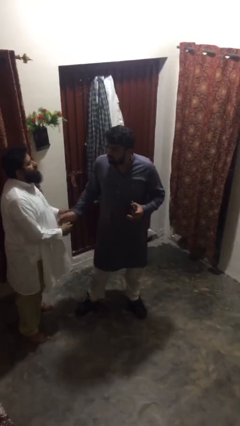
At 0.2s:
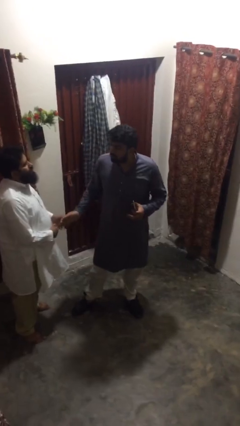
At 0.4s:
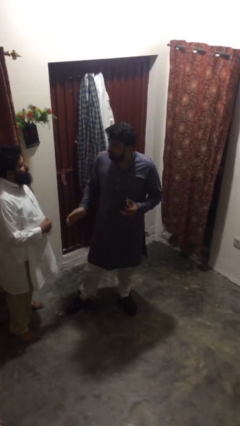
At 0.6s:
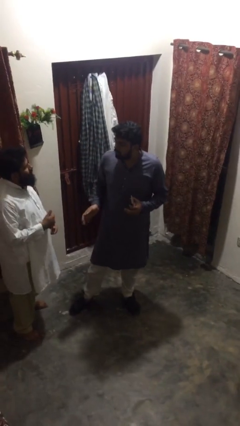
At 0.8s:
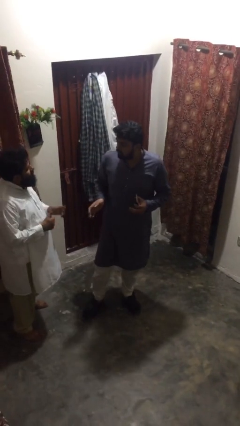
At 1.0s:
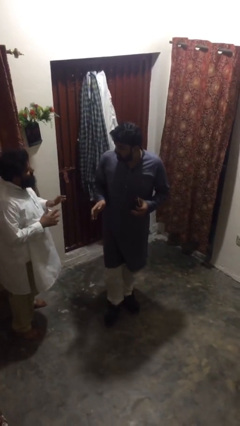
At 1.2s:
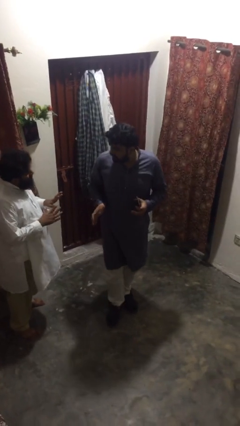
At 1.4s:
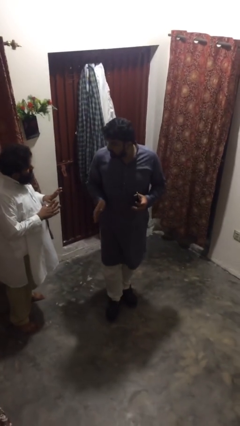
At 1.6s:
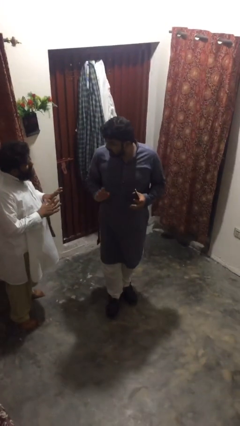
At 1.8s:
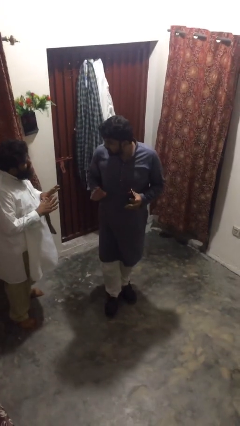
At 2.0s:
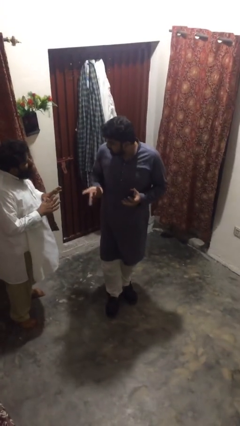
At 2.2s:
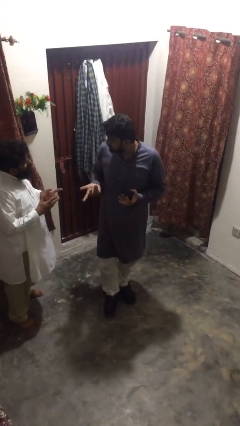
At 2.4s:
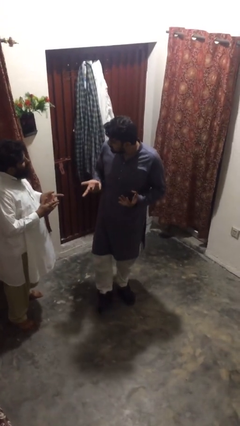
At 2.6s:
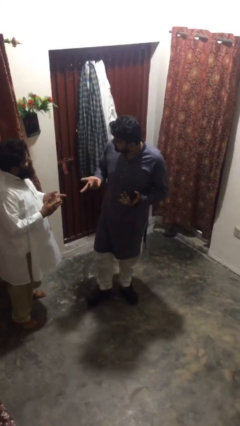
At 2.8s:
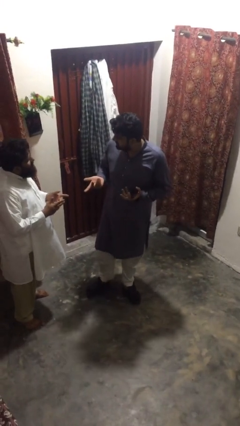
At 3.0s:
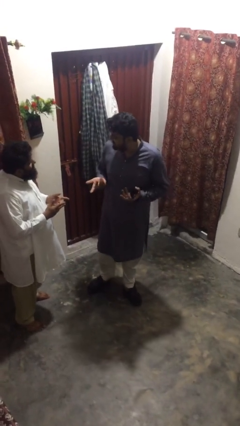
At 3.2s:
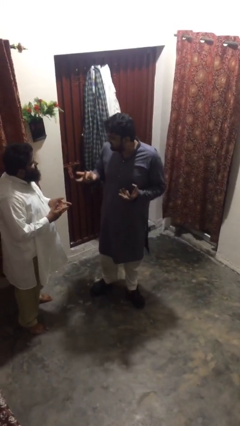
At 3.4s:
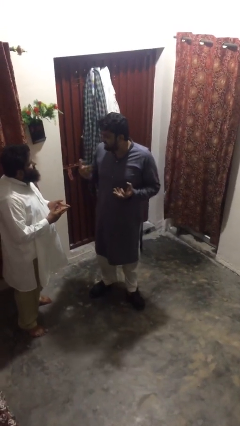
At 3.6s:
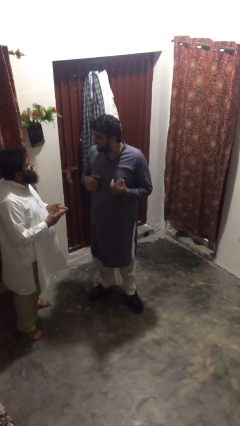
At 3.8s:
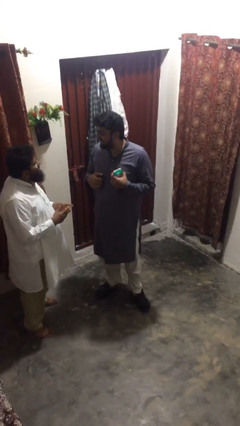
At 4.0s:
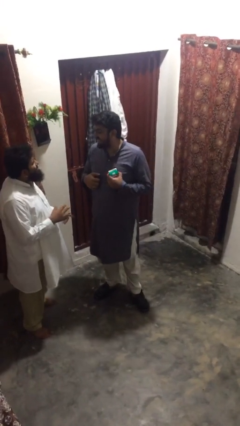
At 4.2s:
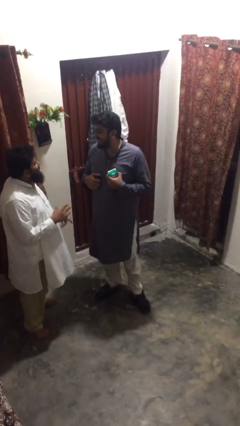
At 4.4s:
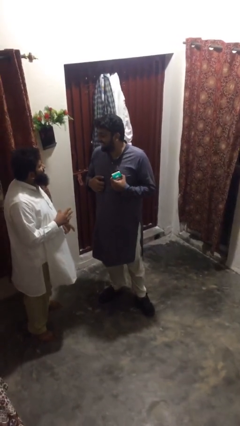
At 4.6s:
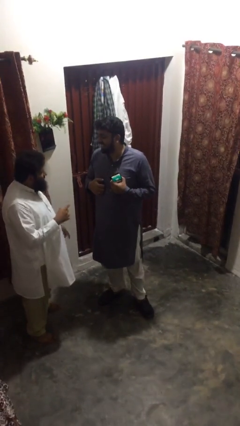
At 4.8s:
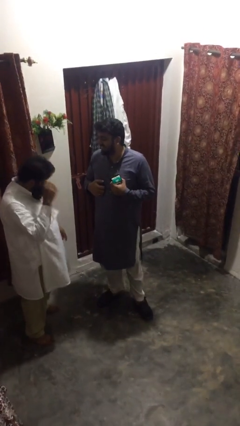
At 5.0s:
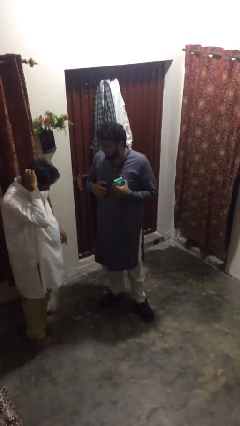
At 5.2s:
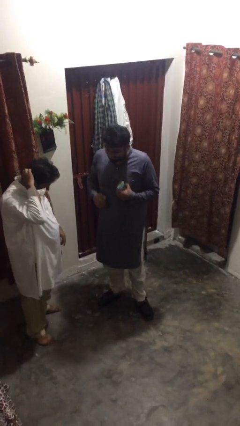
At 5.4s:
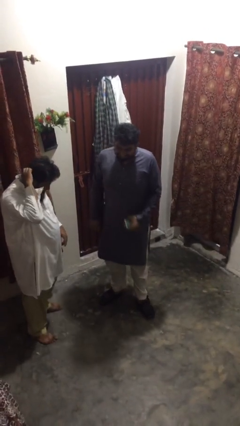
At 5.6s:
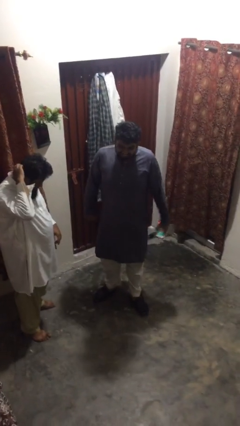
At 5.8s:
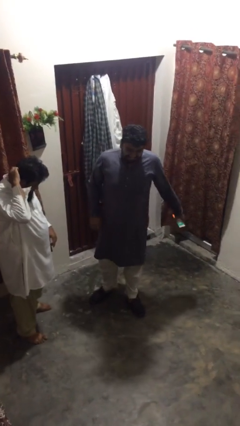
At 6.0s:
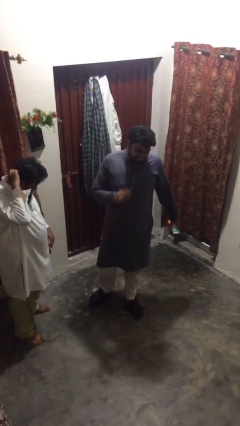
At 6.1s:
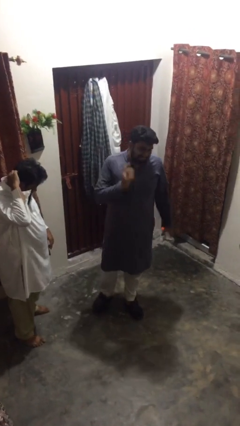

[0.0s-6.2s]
person talks to person

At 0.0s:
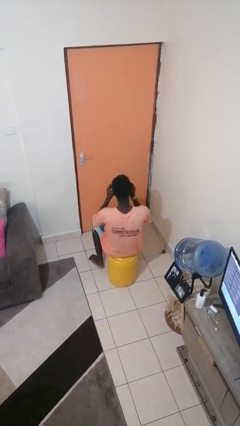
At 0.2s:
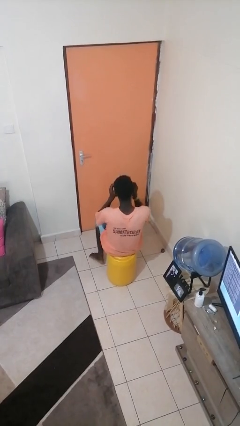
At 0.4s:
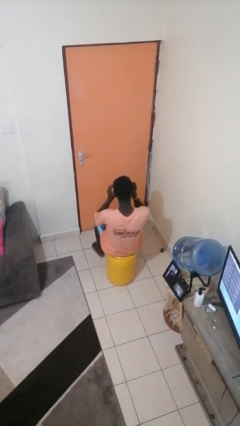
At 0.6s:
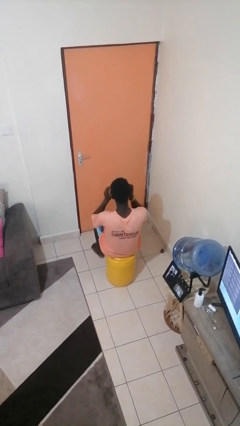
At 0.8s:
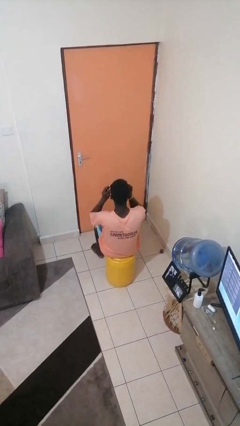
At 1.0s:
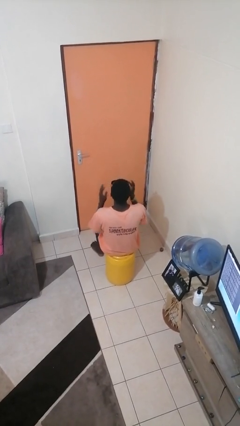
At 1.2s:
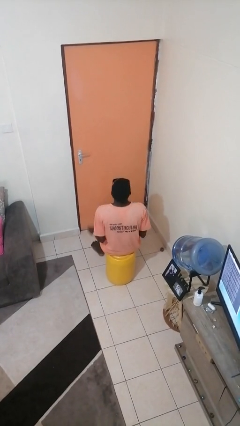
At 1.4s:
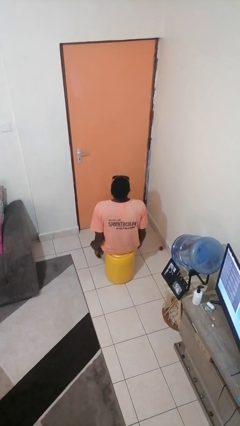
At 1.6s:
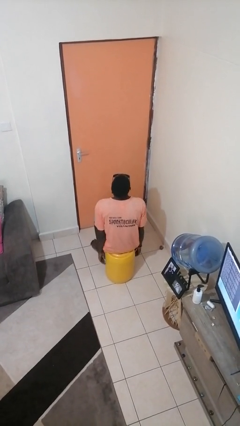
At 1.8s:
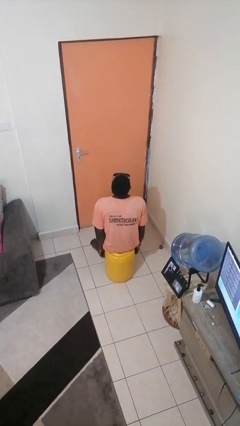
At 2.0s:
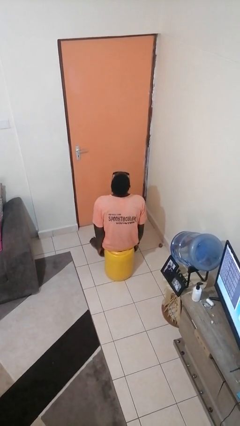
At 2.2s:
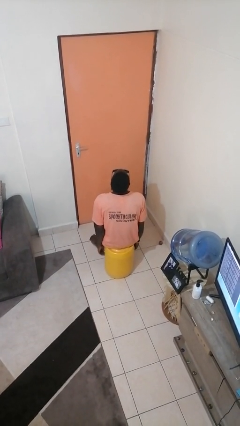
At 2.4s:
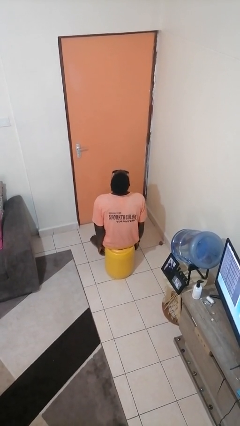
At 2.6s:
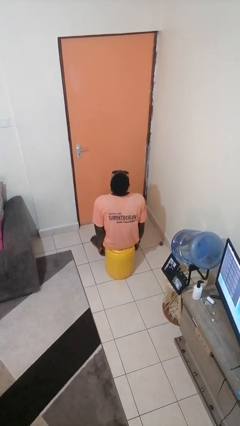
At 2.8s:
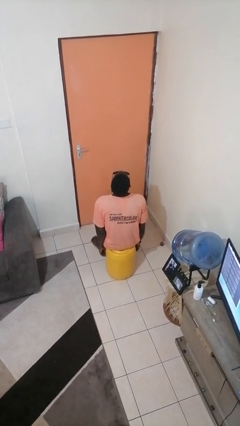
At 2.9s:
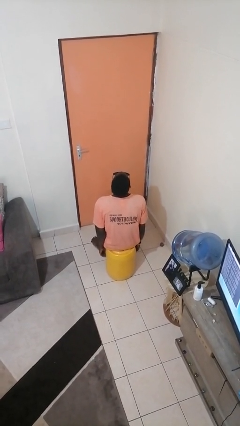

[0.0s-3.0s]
person puts on sunglasses

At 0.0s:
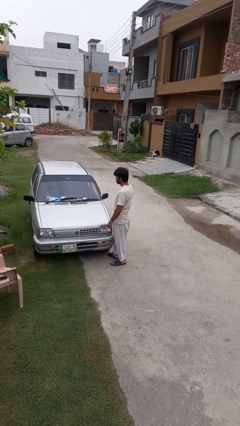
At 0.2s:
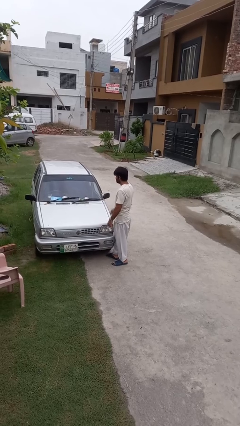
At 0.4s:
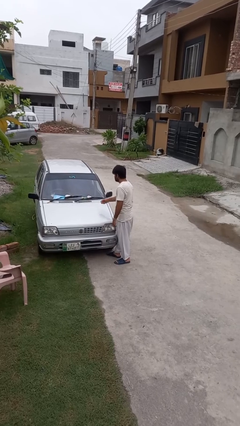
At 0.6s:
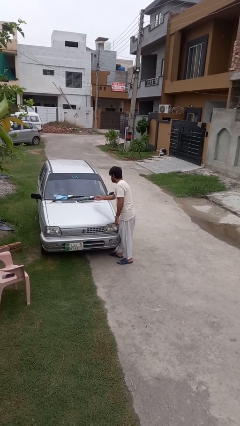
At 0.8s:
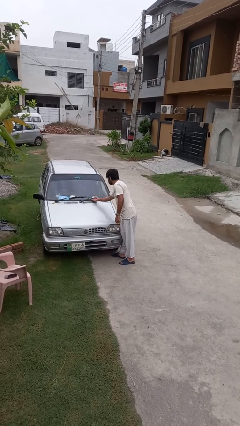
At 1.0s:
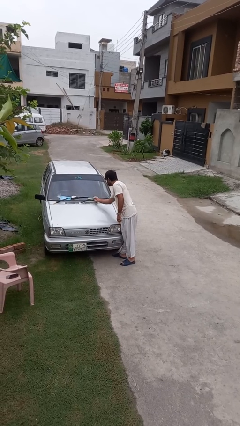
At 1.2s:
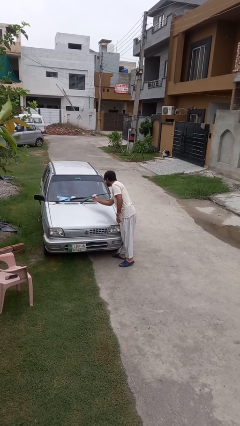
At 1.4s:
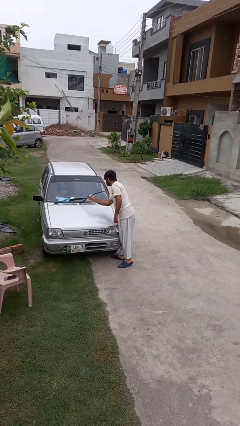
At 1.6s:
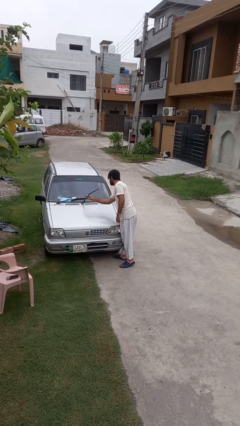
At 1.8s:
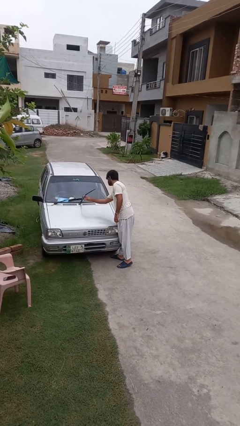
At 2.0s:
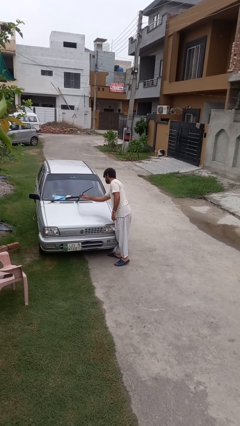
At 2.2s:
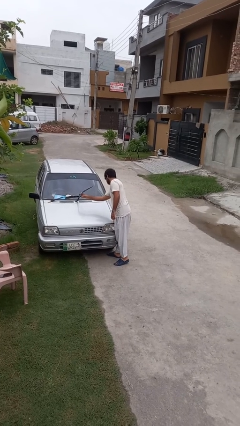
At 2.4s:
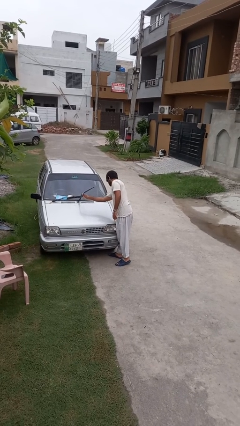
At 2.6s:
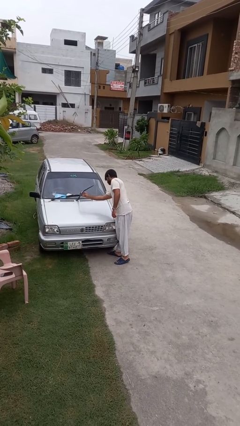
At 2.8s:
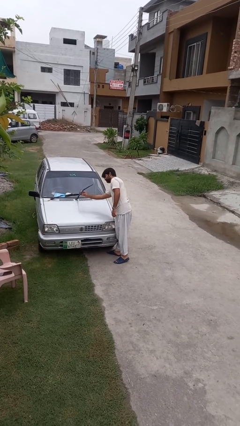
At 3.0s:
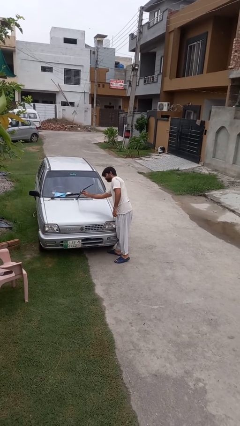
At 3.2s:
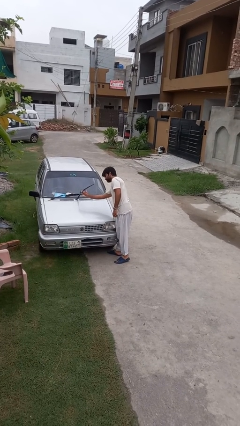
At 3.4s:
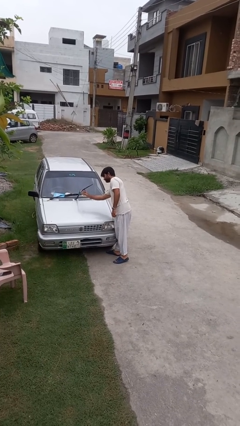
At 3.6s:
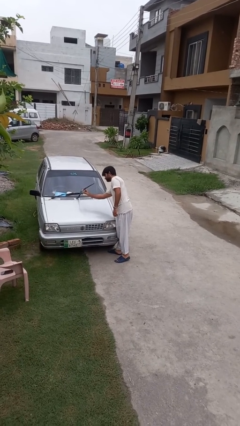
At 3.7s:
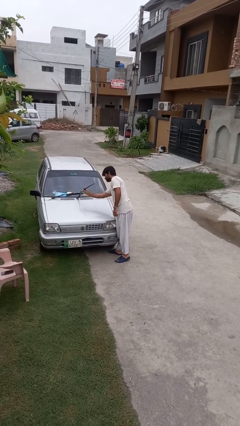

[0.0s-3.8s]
person flips up car wipers

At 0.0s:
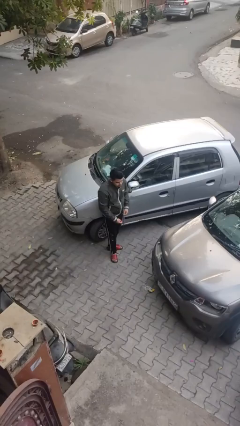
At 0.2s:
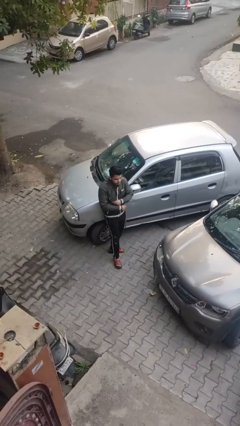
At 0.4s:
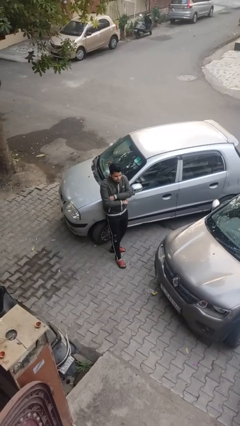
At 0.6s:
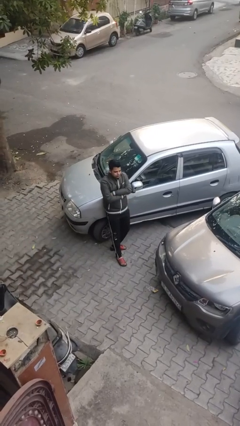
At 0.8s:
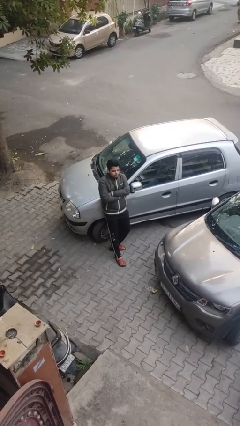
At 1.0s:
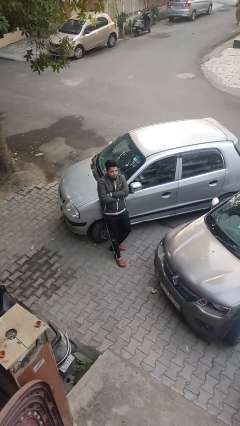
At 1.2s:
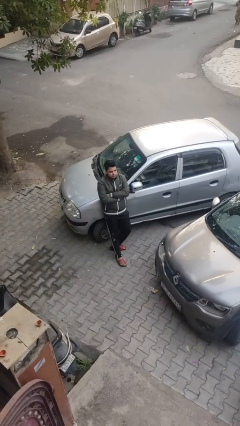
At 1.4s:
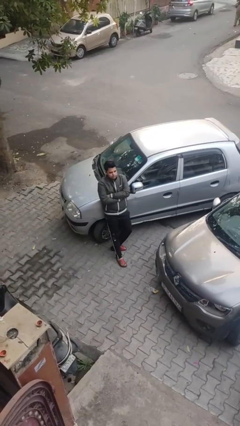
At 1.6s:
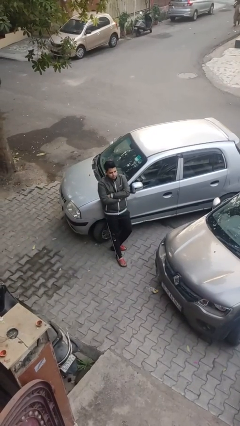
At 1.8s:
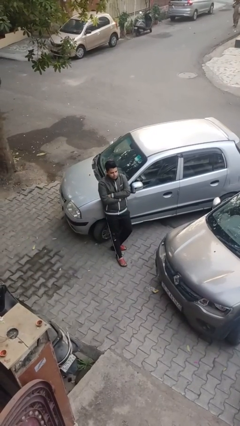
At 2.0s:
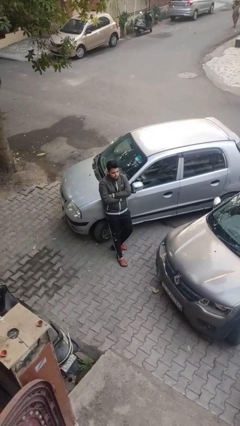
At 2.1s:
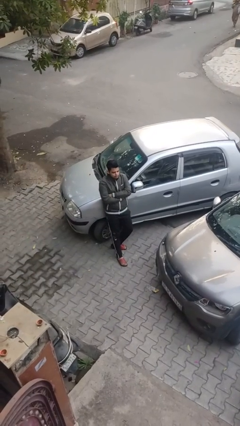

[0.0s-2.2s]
person leans against car

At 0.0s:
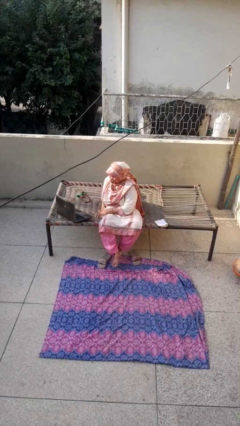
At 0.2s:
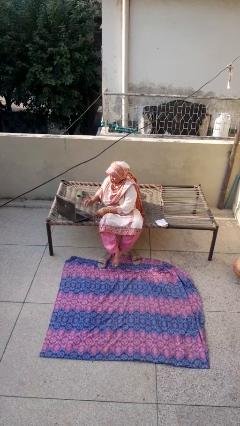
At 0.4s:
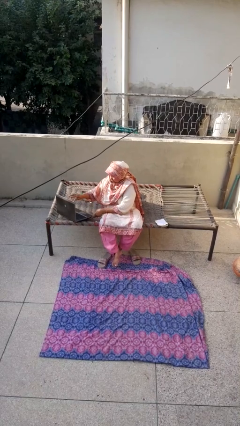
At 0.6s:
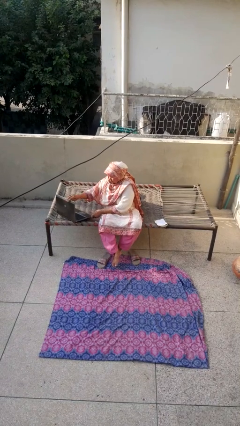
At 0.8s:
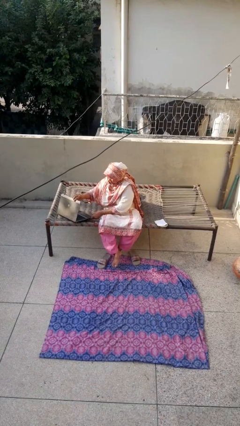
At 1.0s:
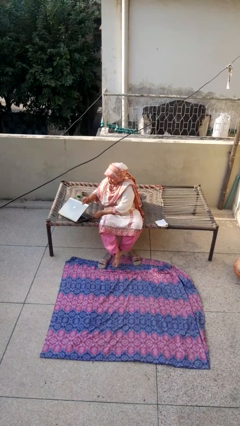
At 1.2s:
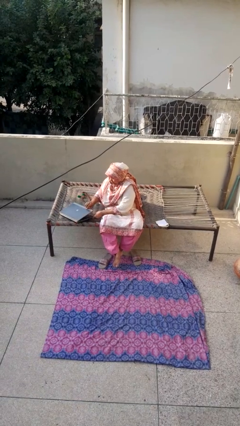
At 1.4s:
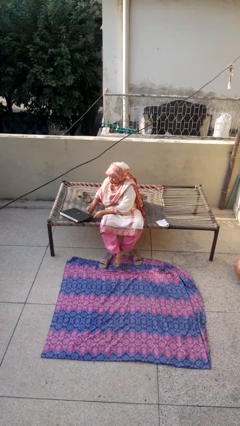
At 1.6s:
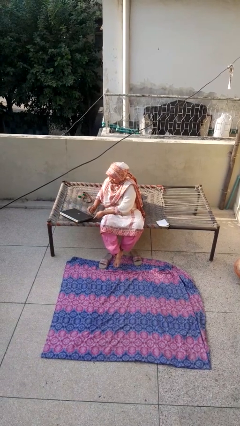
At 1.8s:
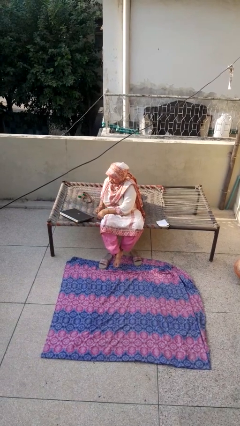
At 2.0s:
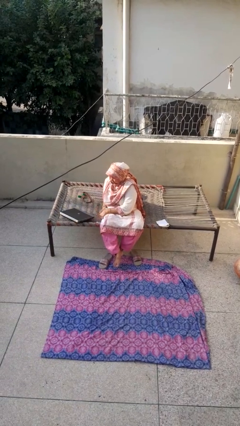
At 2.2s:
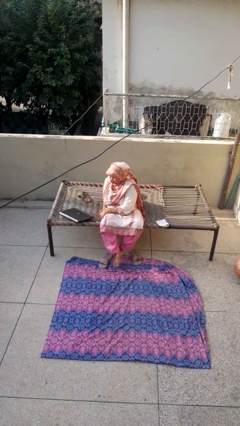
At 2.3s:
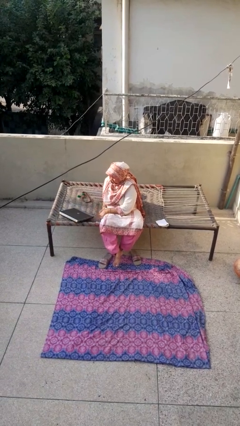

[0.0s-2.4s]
person closes laptop
